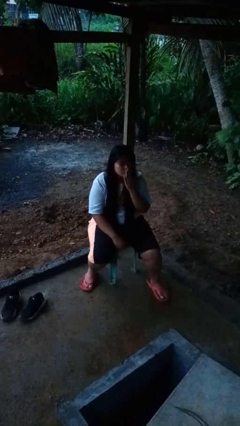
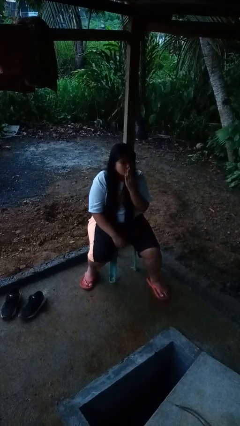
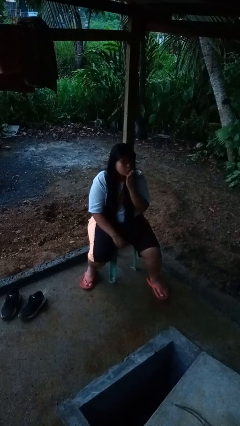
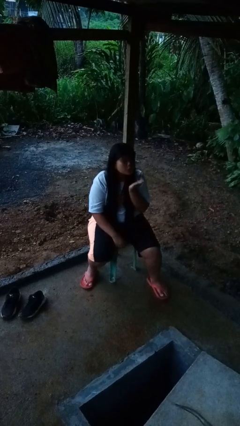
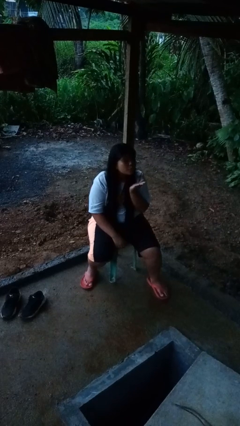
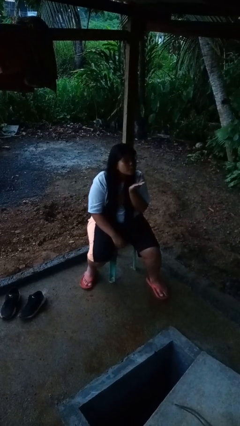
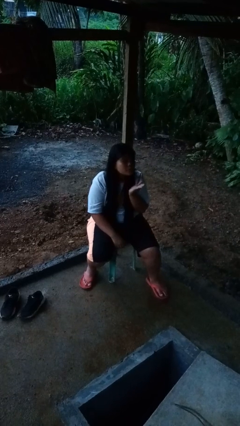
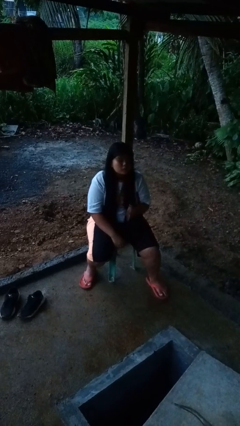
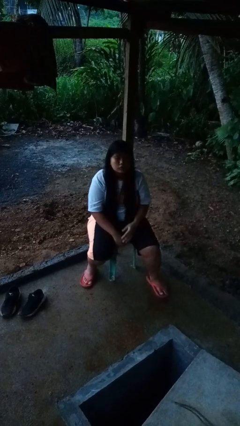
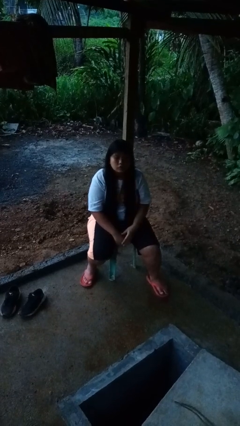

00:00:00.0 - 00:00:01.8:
person gestures blow kiss

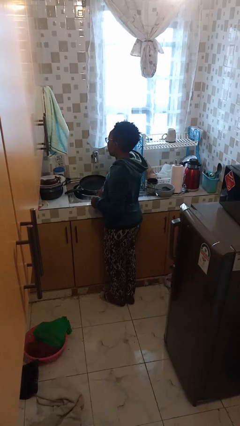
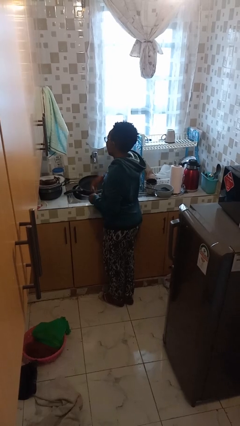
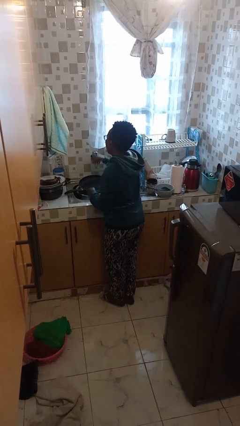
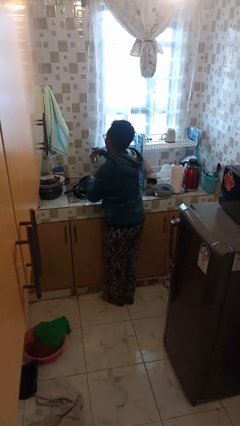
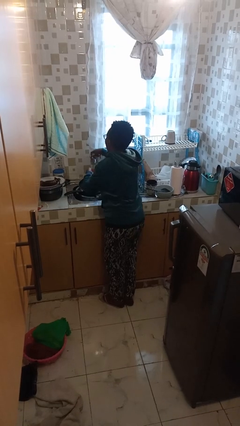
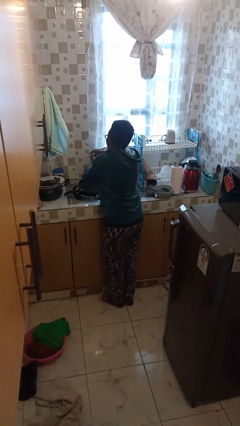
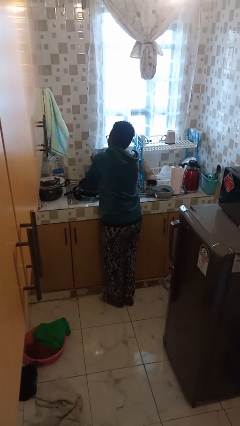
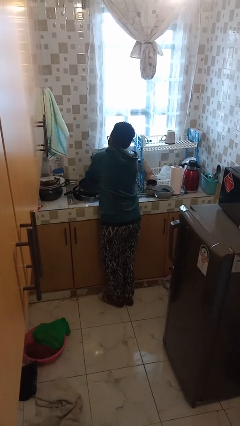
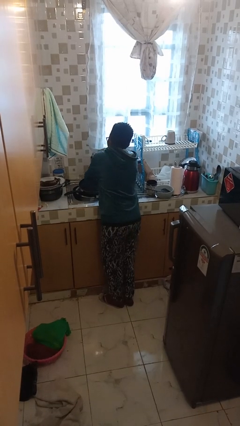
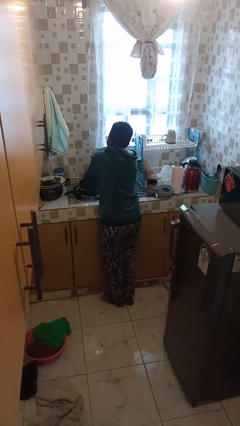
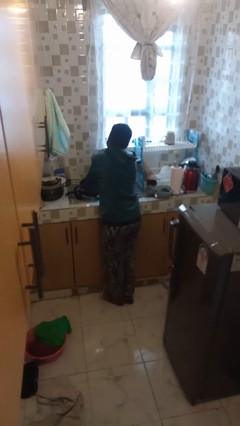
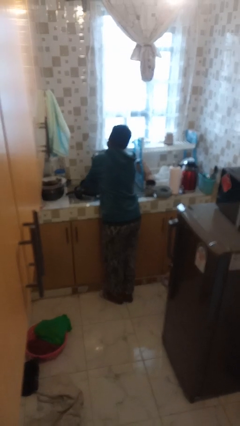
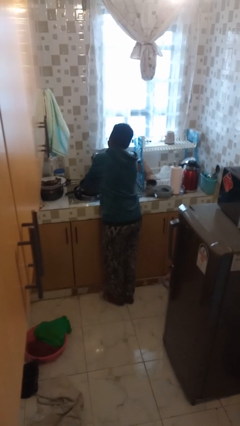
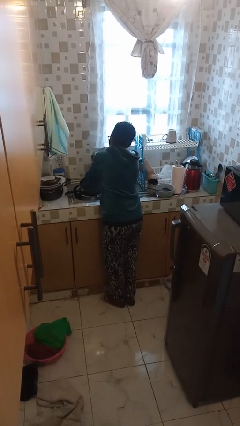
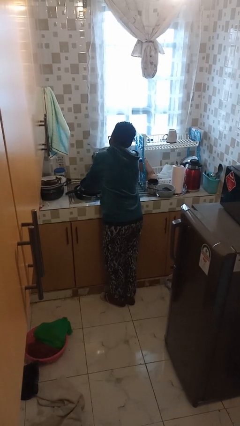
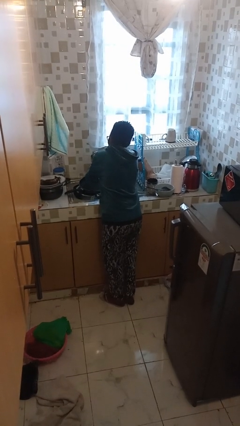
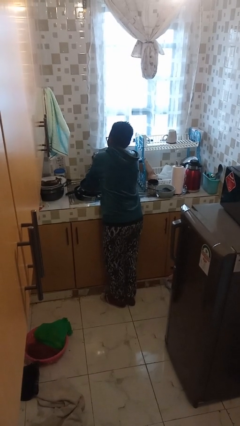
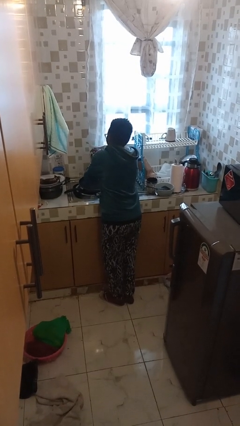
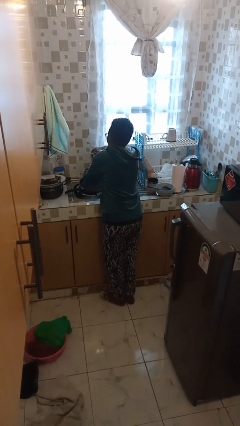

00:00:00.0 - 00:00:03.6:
person washes hands

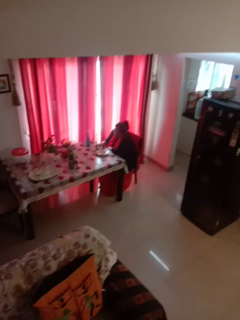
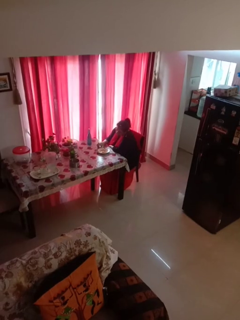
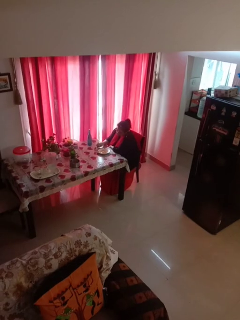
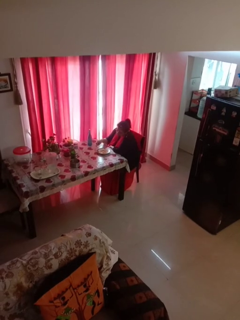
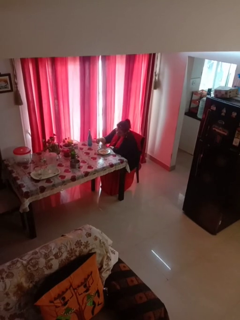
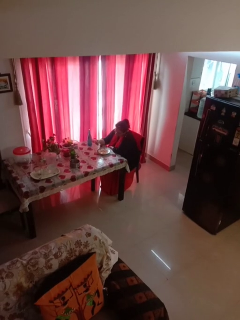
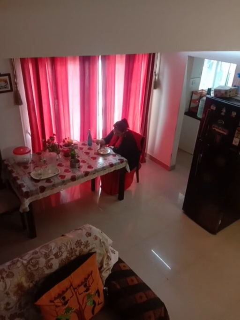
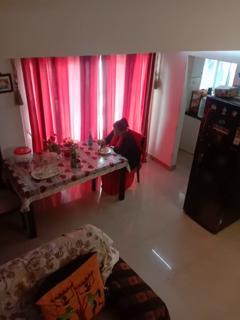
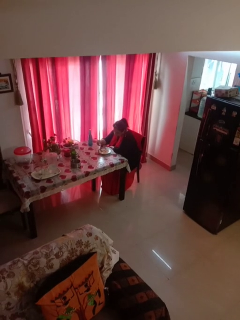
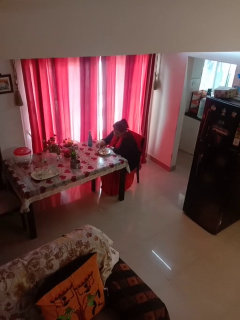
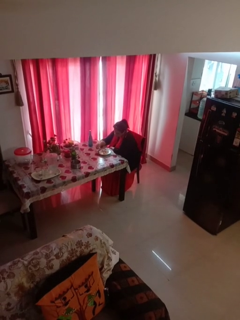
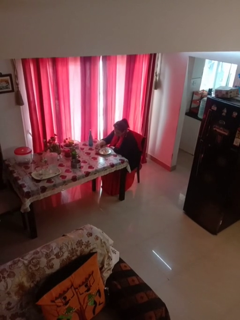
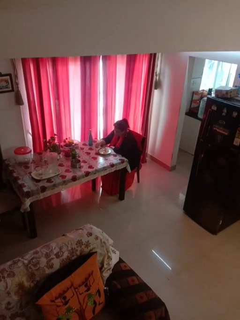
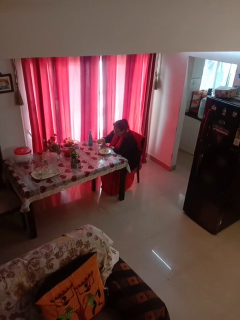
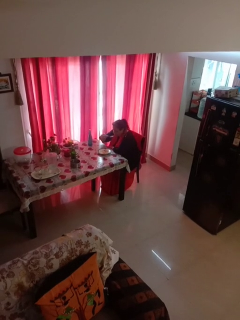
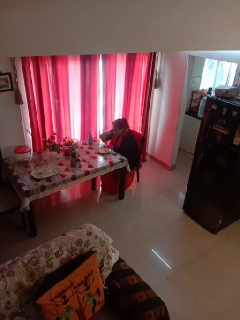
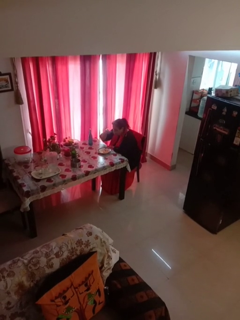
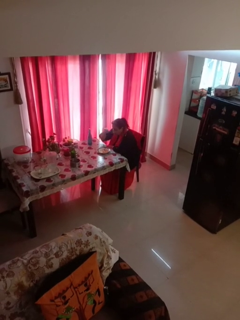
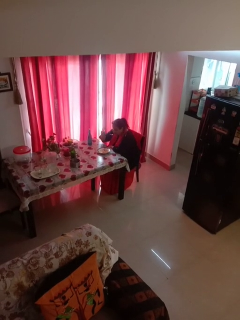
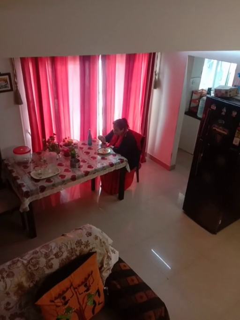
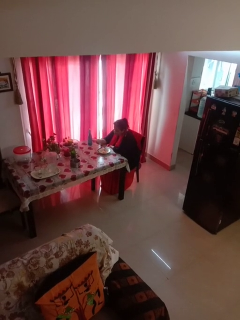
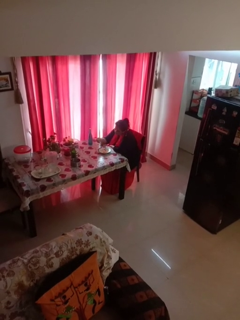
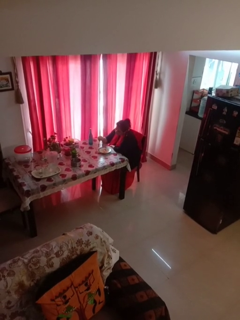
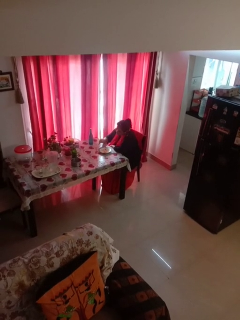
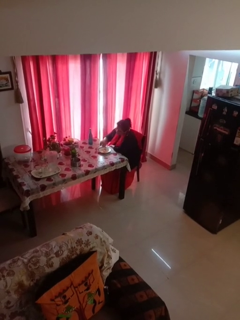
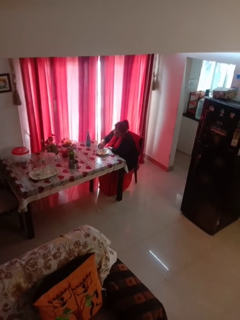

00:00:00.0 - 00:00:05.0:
person eats with utensil

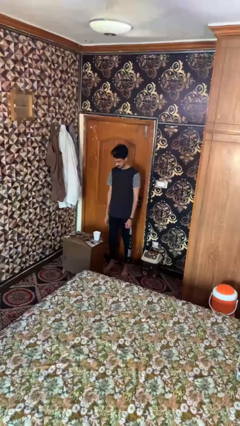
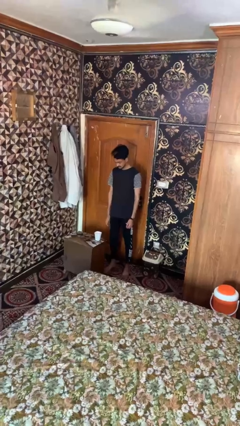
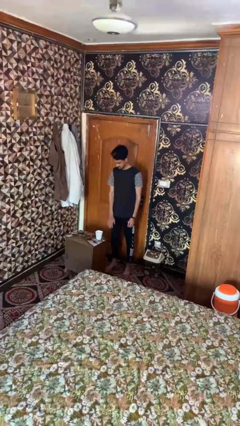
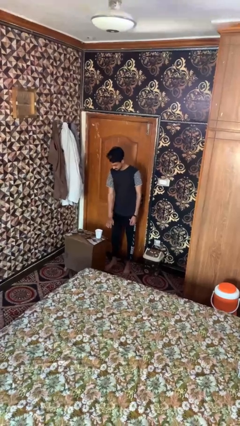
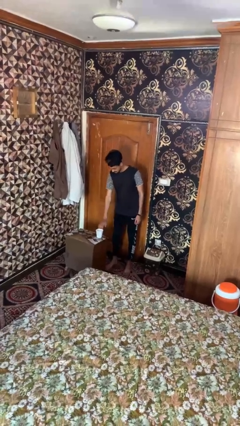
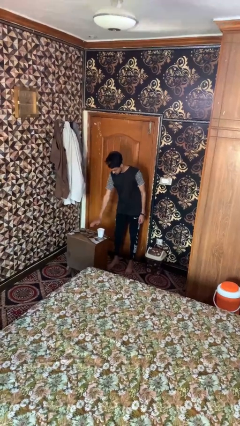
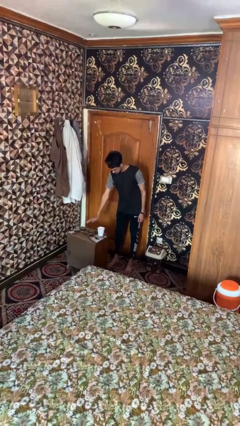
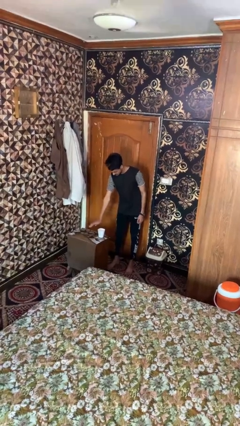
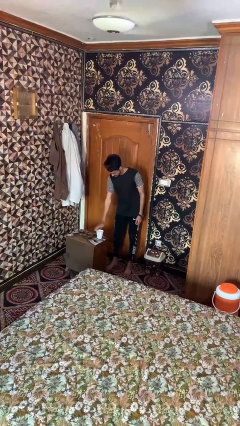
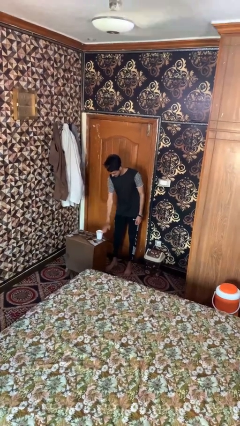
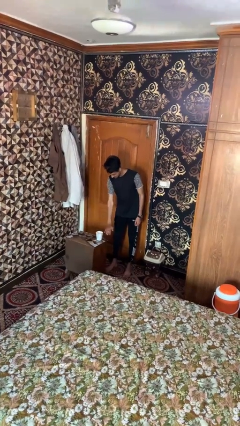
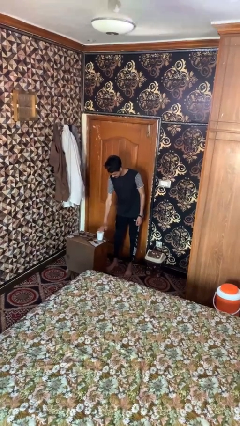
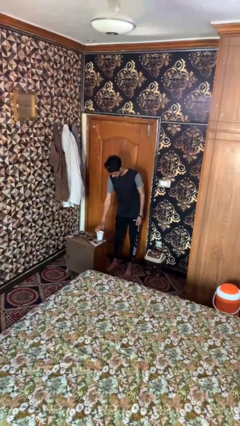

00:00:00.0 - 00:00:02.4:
person waves hand over object

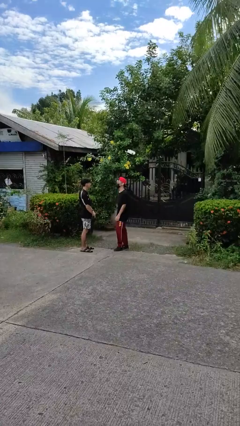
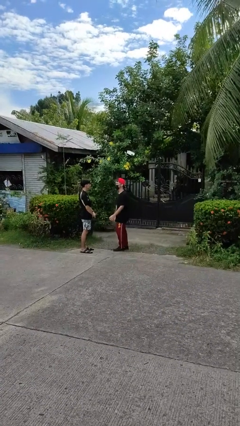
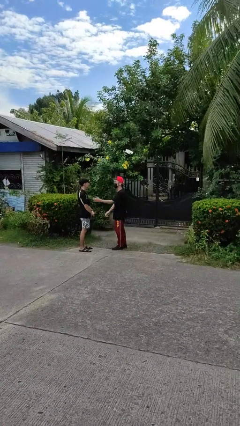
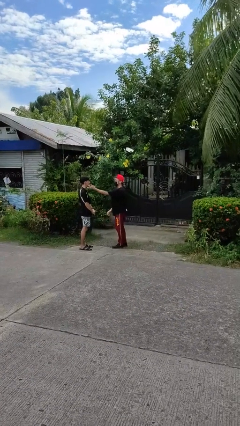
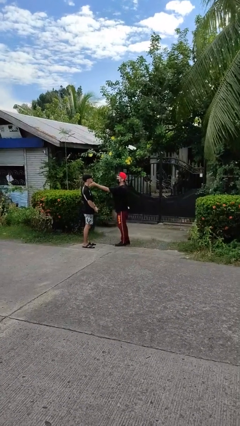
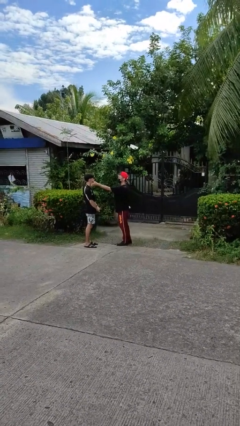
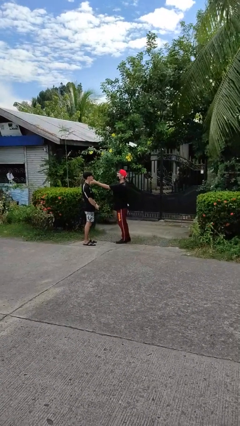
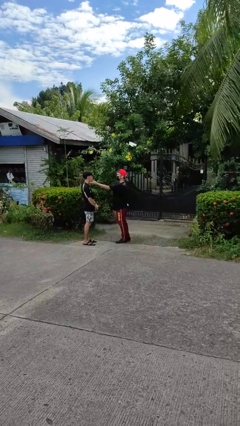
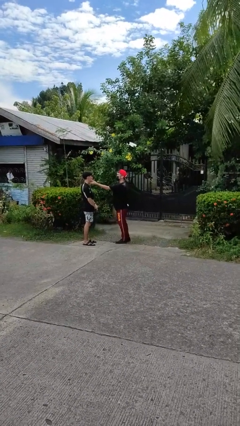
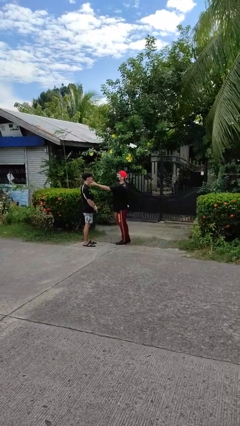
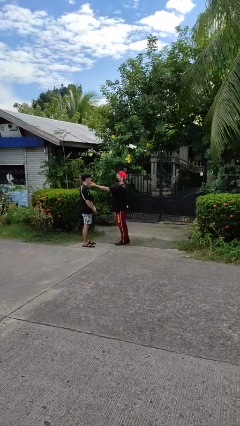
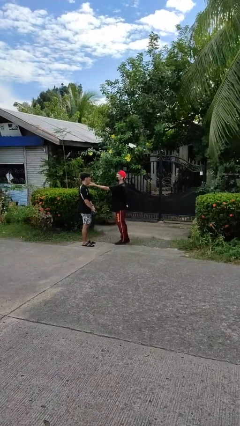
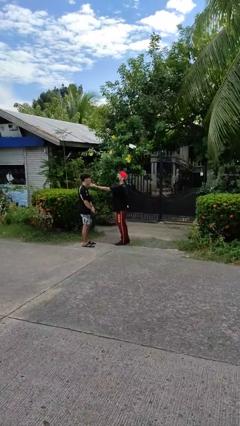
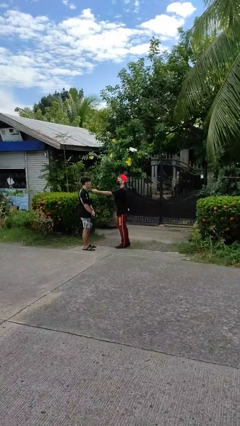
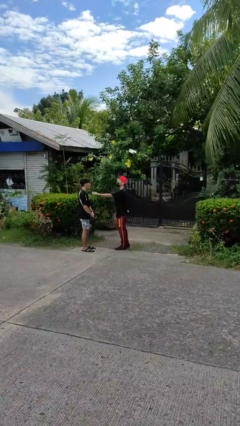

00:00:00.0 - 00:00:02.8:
person touches face of person

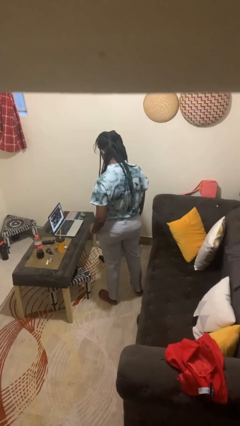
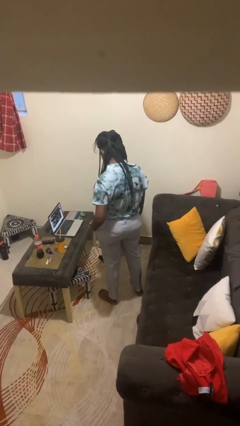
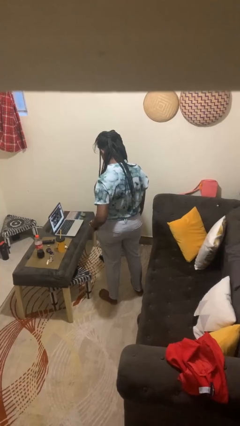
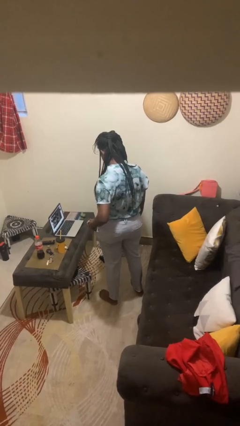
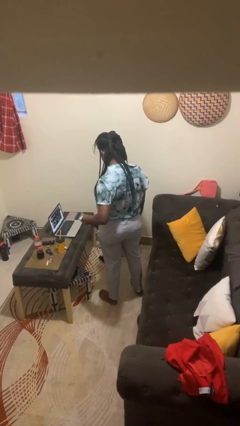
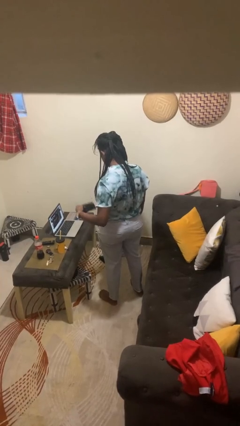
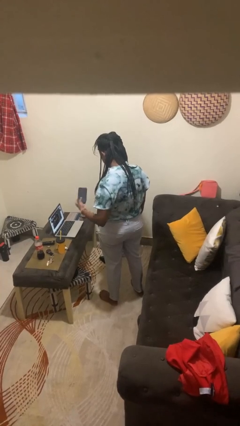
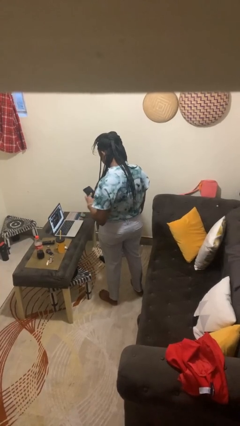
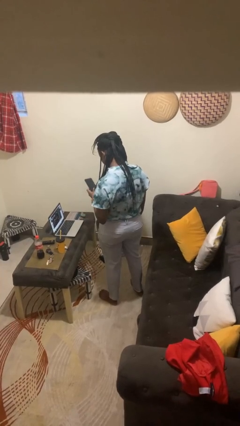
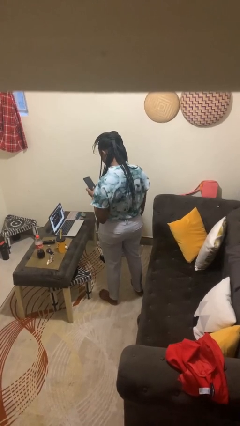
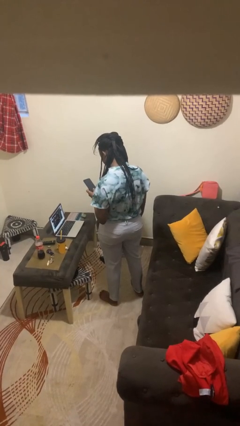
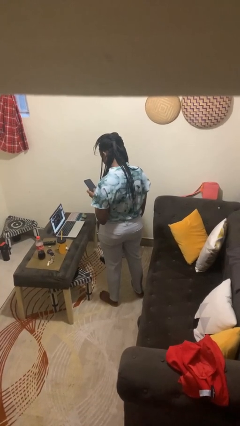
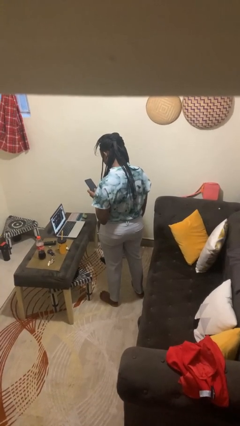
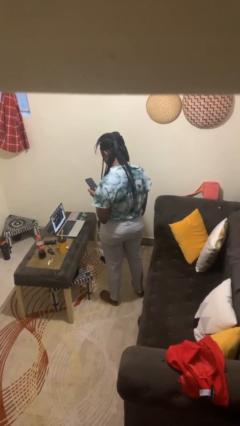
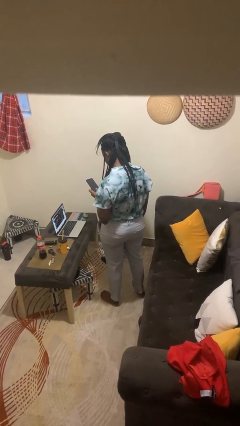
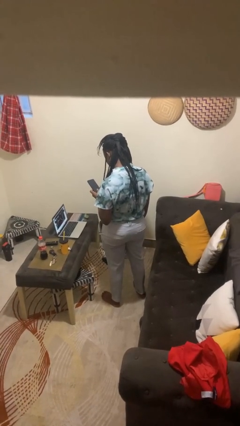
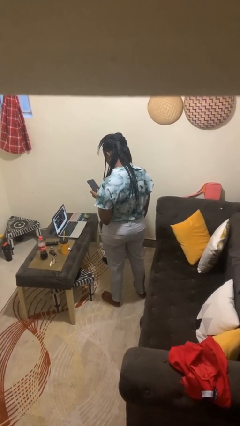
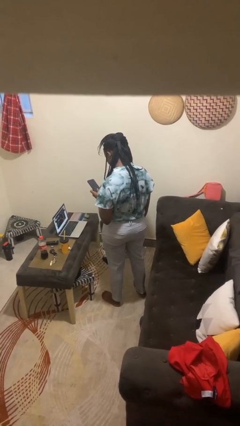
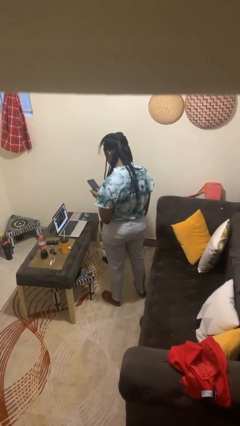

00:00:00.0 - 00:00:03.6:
person takes phone from pocket
